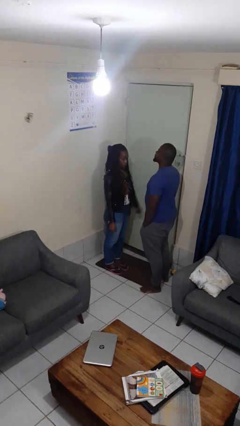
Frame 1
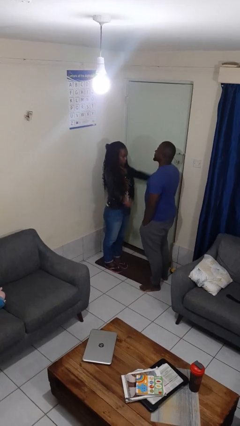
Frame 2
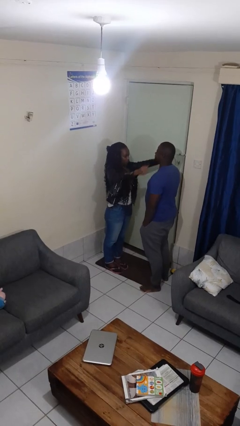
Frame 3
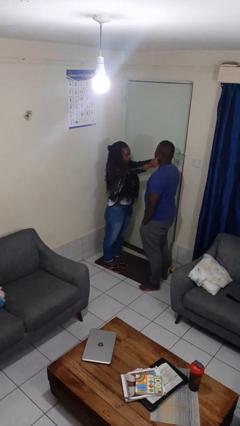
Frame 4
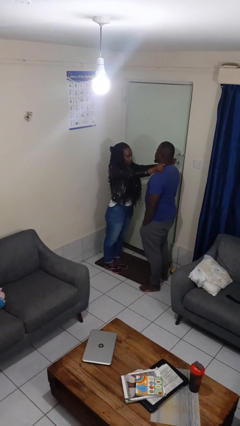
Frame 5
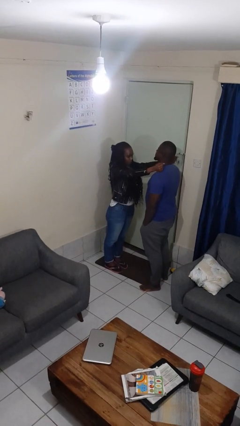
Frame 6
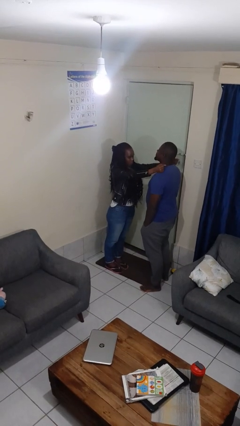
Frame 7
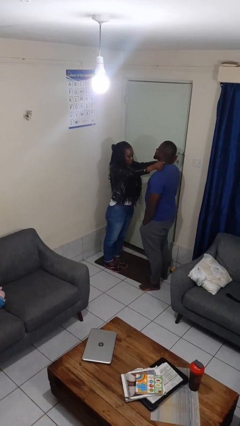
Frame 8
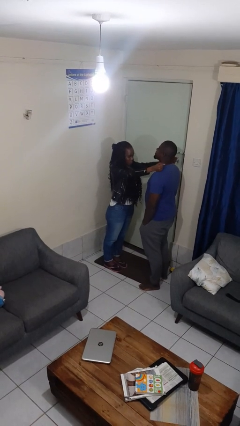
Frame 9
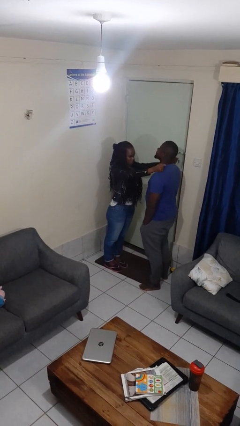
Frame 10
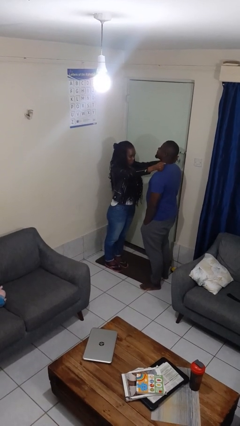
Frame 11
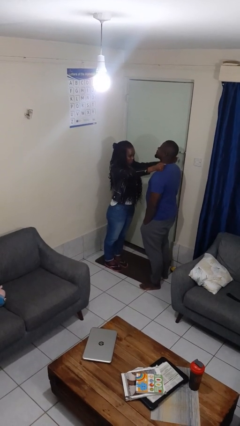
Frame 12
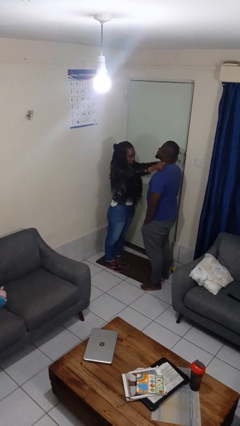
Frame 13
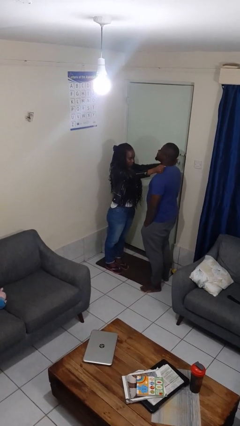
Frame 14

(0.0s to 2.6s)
person pounds shoulders of person

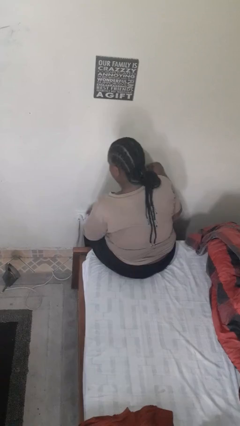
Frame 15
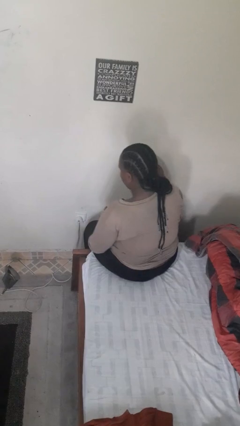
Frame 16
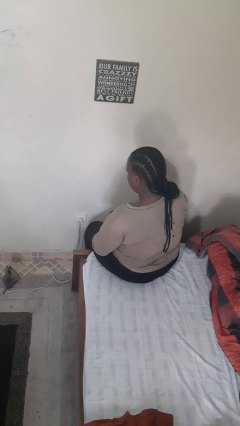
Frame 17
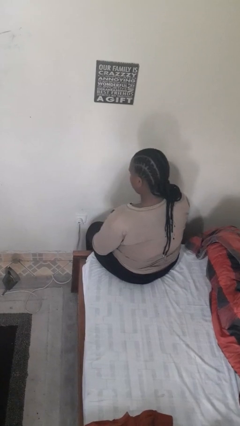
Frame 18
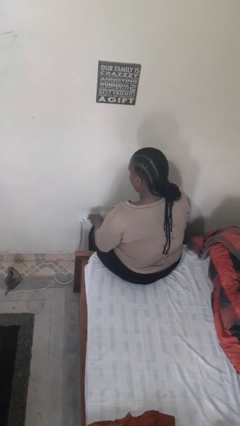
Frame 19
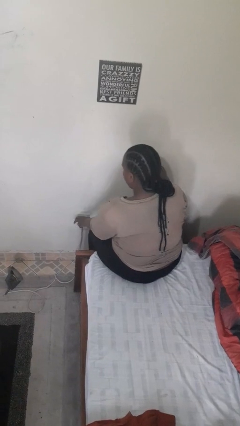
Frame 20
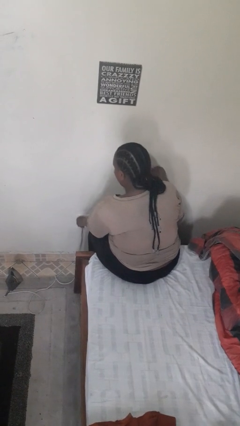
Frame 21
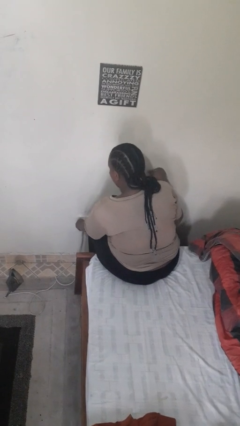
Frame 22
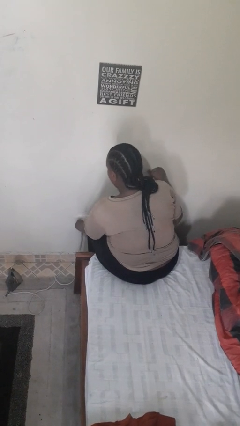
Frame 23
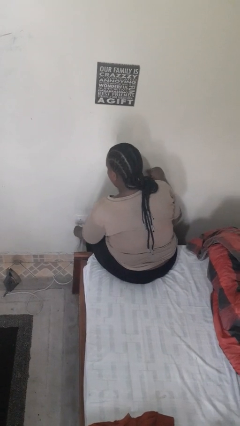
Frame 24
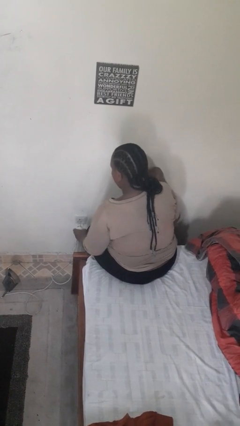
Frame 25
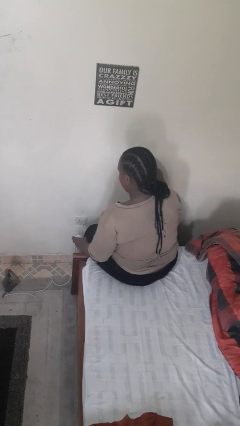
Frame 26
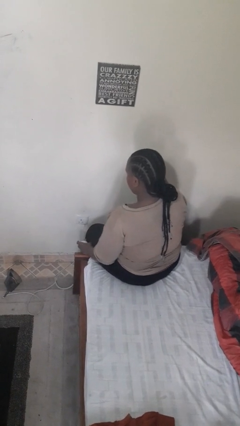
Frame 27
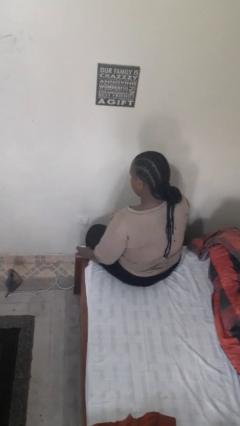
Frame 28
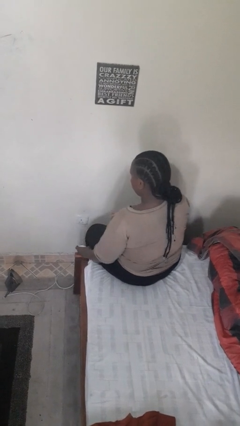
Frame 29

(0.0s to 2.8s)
person unplugs from electrical socket

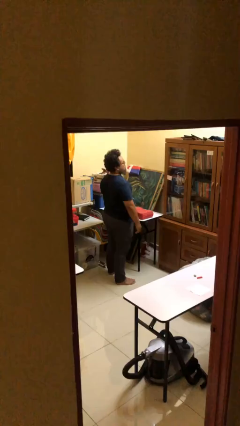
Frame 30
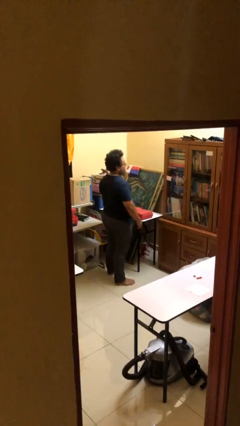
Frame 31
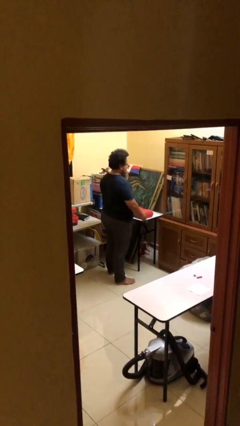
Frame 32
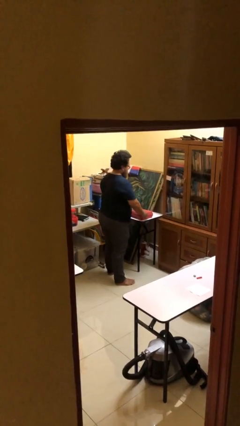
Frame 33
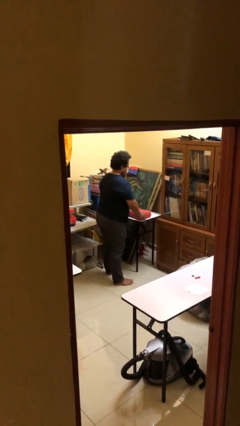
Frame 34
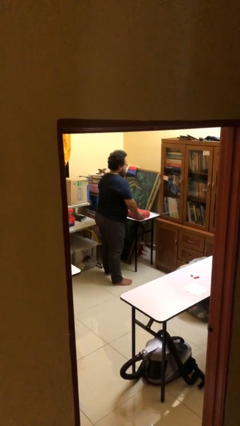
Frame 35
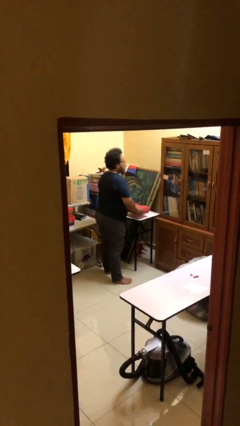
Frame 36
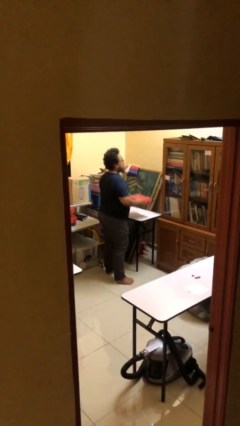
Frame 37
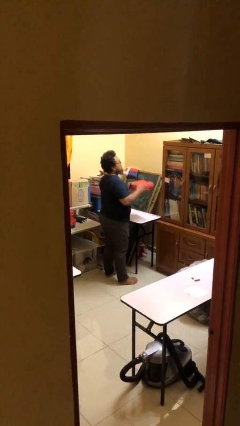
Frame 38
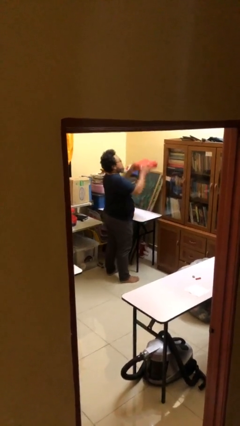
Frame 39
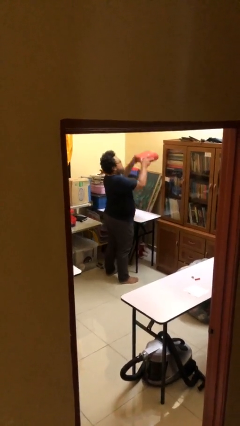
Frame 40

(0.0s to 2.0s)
person picks up object from table

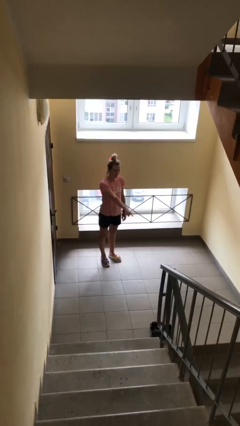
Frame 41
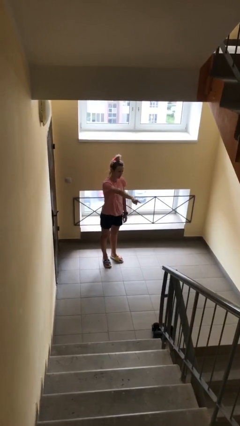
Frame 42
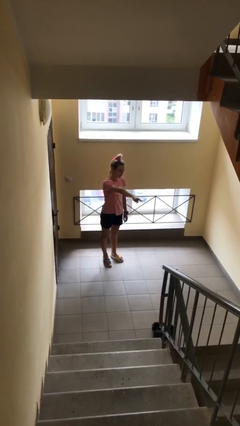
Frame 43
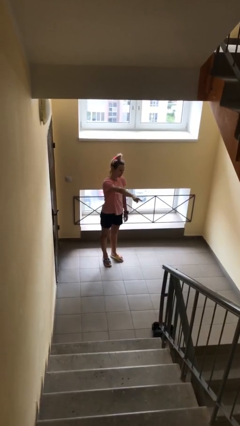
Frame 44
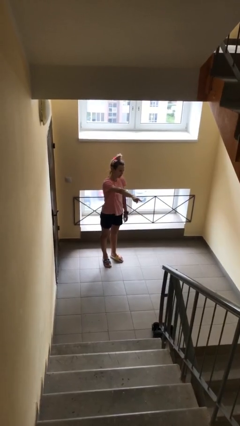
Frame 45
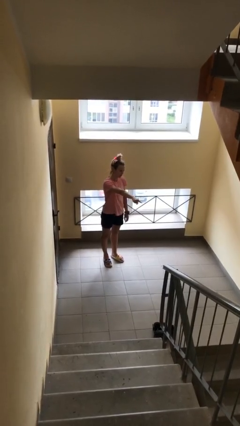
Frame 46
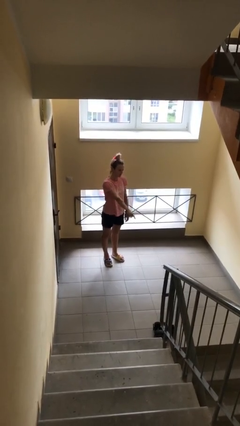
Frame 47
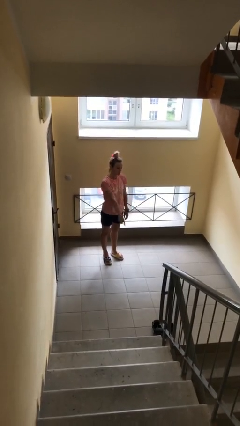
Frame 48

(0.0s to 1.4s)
person points at person

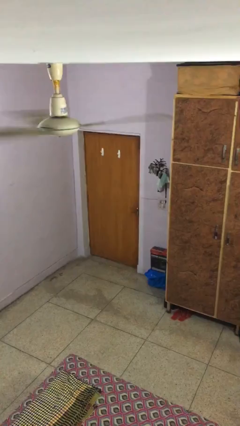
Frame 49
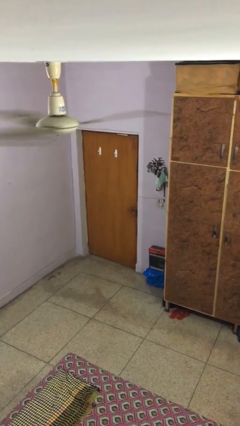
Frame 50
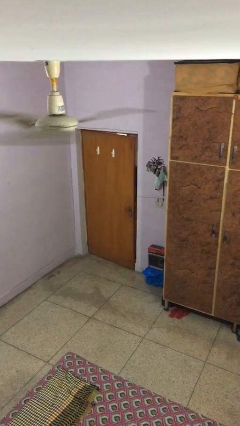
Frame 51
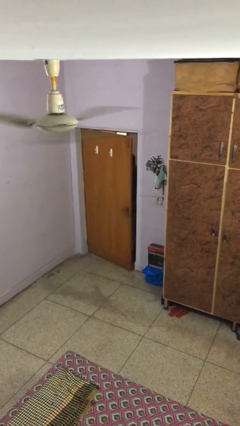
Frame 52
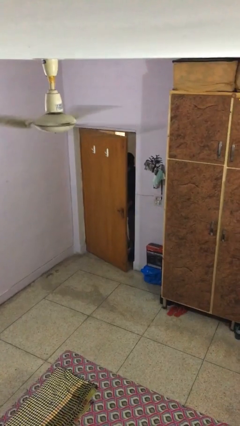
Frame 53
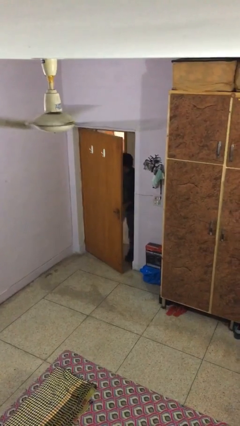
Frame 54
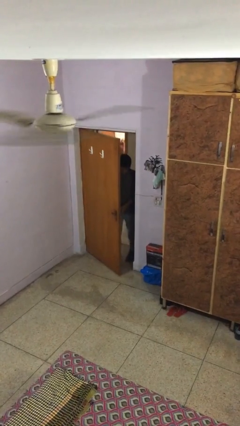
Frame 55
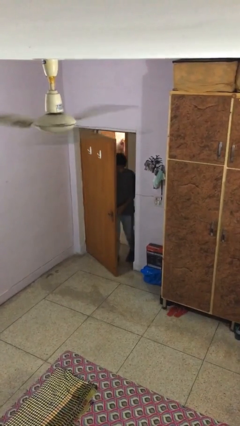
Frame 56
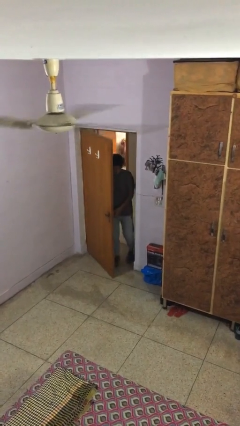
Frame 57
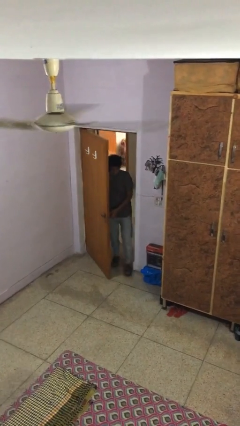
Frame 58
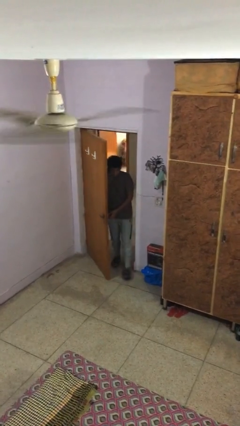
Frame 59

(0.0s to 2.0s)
person opens facility door

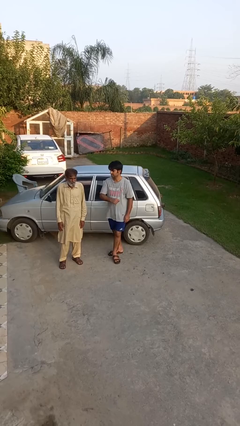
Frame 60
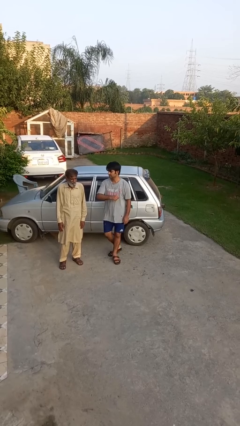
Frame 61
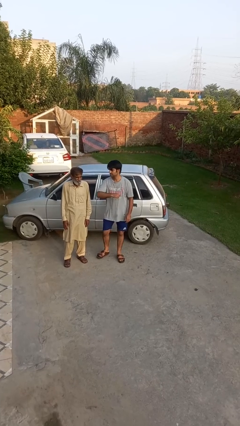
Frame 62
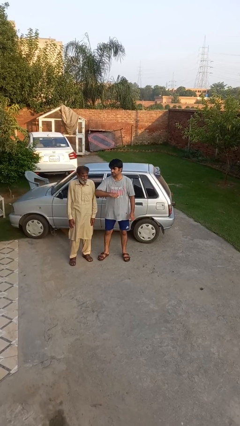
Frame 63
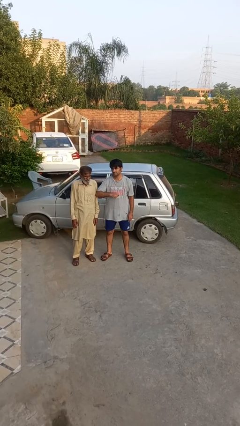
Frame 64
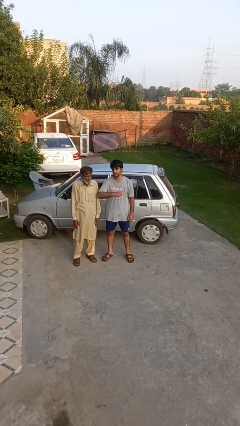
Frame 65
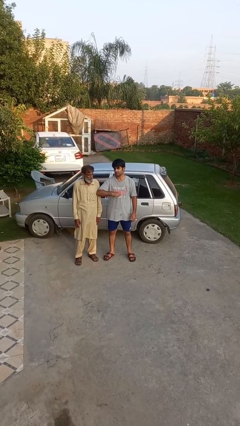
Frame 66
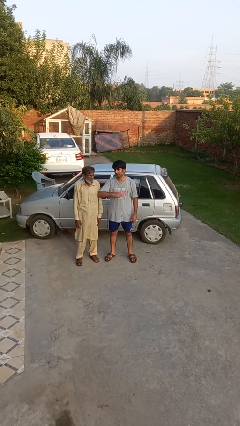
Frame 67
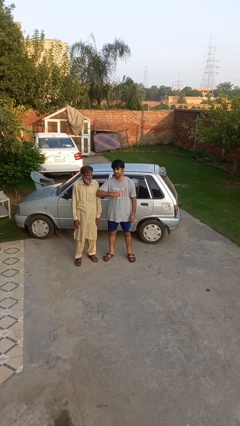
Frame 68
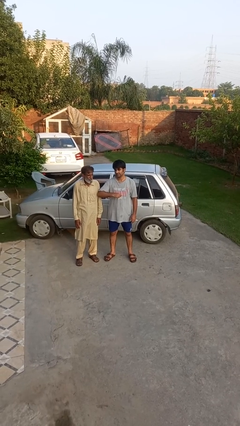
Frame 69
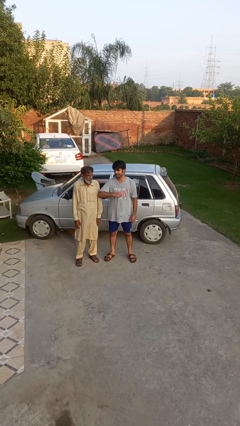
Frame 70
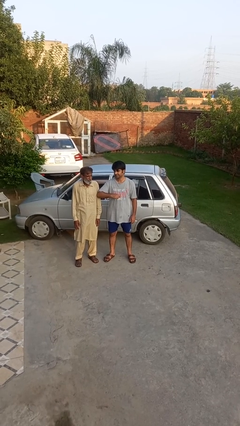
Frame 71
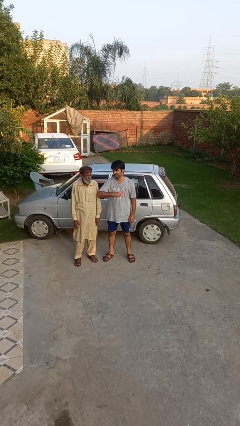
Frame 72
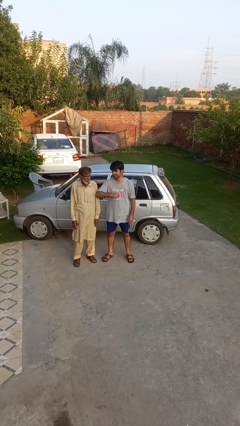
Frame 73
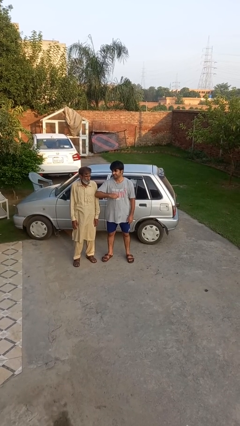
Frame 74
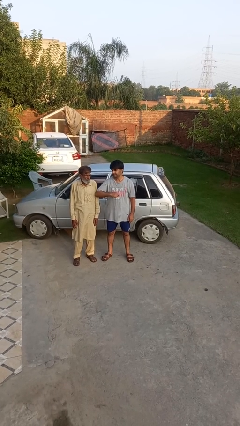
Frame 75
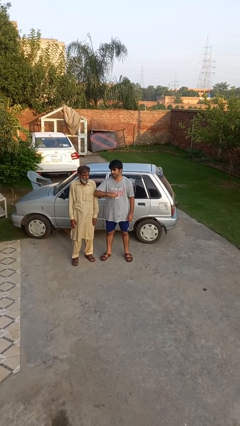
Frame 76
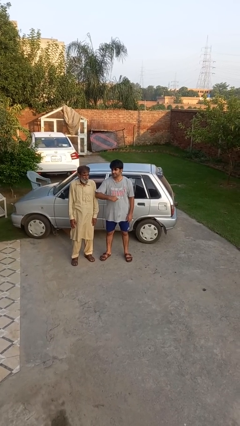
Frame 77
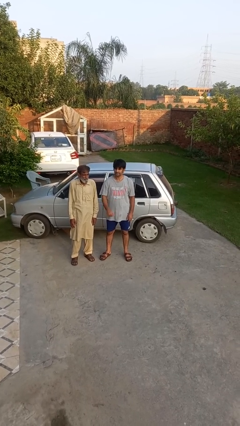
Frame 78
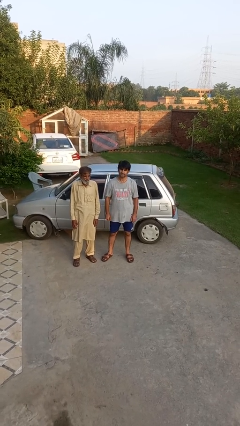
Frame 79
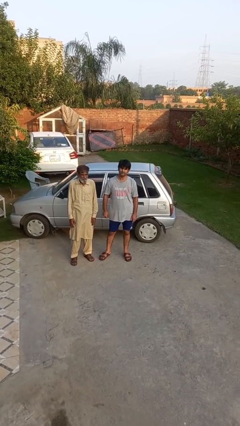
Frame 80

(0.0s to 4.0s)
person nudges person with elbow

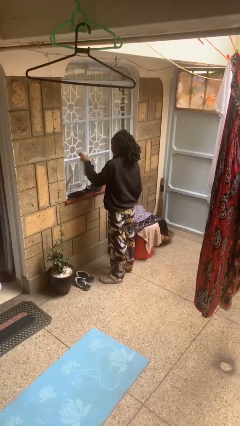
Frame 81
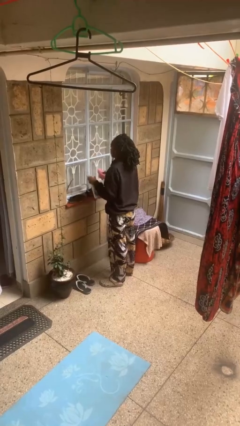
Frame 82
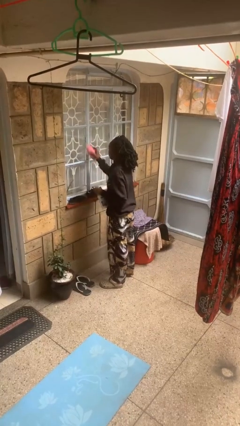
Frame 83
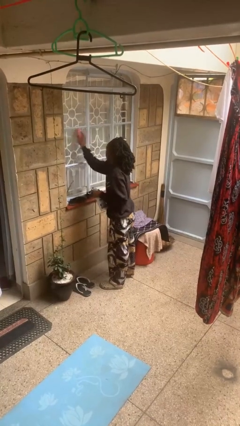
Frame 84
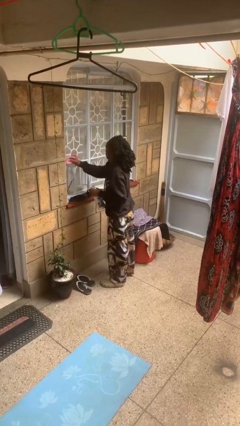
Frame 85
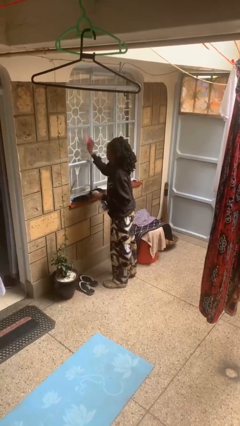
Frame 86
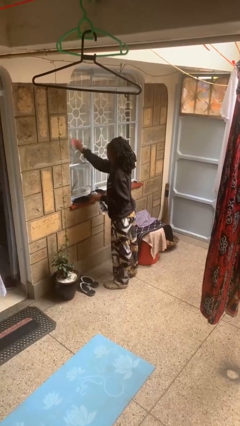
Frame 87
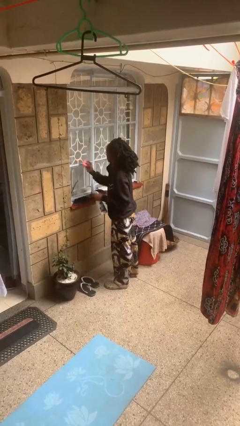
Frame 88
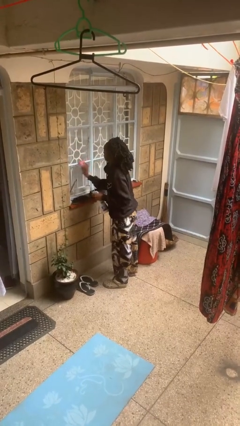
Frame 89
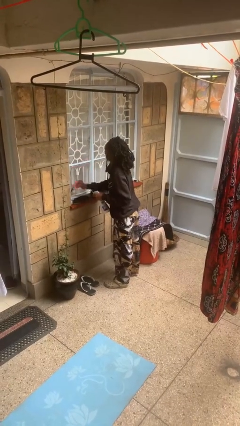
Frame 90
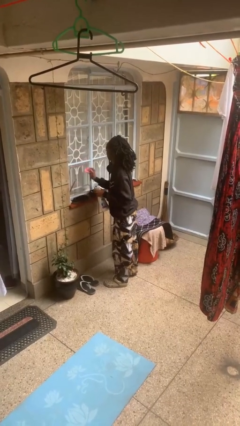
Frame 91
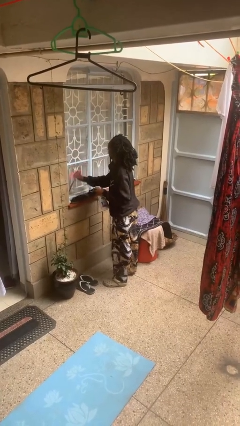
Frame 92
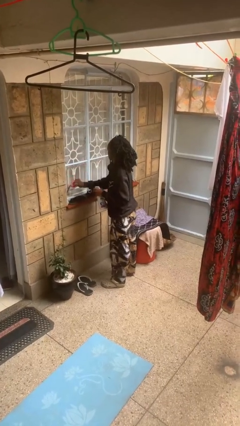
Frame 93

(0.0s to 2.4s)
person washes window

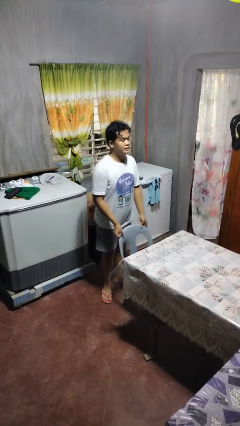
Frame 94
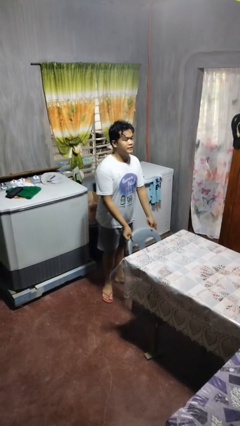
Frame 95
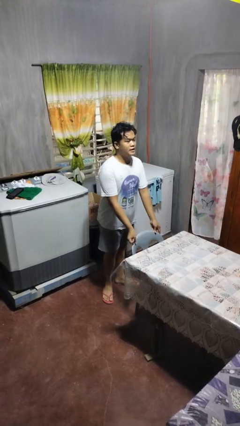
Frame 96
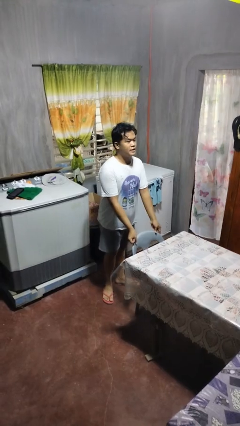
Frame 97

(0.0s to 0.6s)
person pushes in chair
